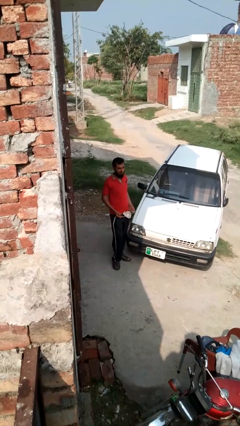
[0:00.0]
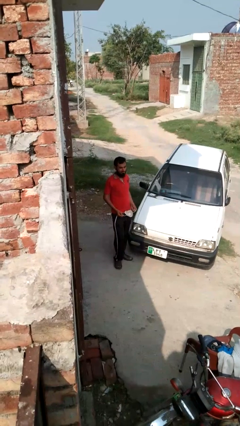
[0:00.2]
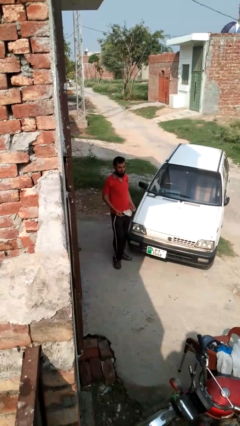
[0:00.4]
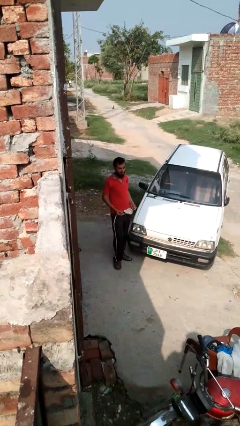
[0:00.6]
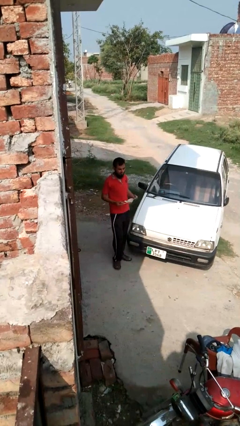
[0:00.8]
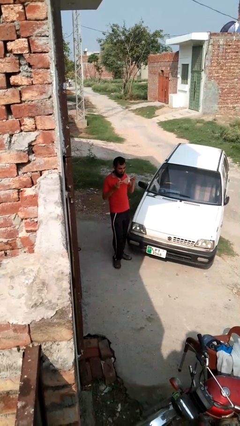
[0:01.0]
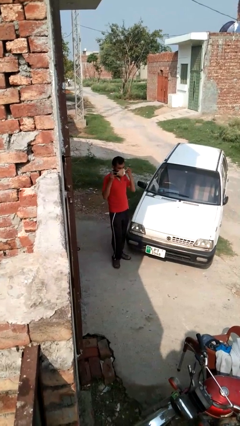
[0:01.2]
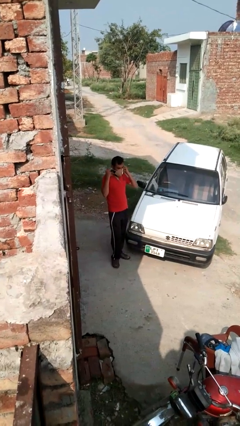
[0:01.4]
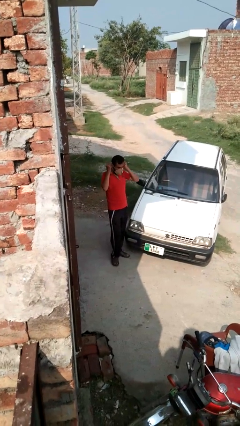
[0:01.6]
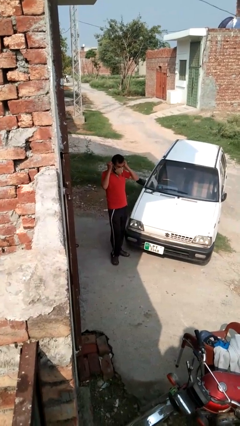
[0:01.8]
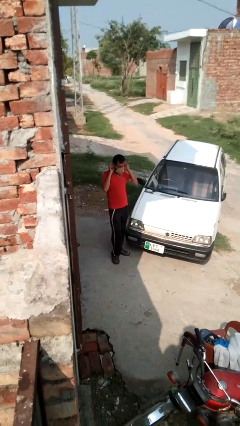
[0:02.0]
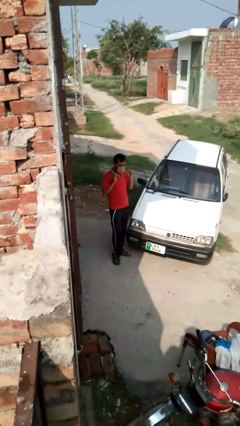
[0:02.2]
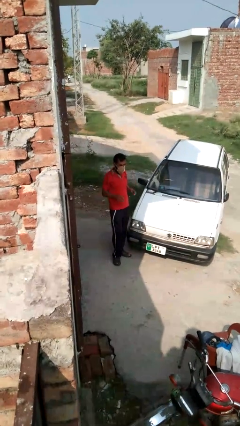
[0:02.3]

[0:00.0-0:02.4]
person puts on facemask

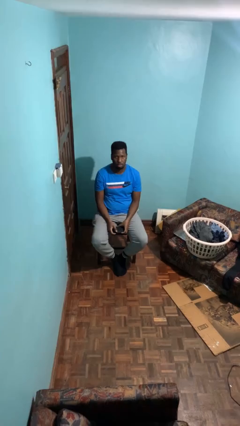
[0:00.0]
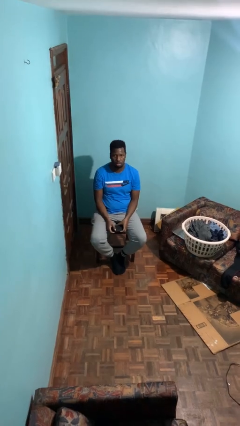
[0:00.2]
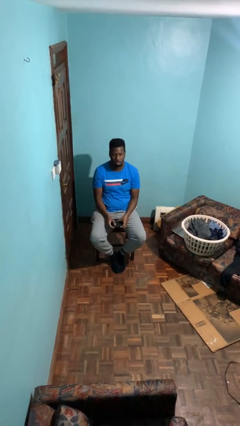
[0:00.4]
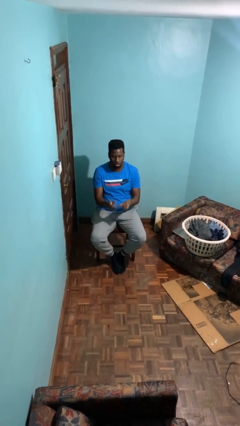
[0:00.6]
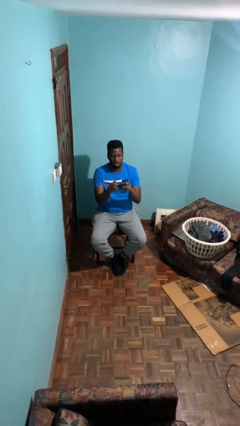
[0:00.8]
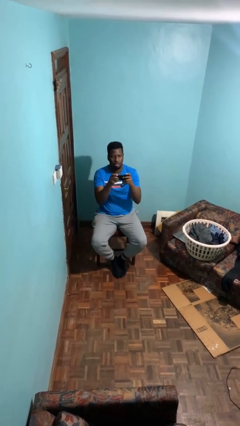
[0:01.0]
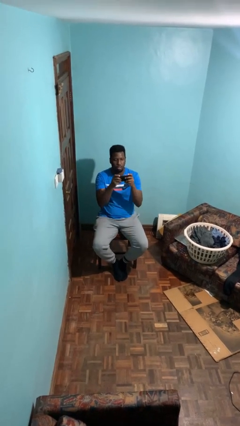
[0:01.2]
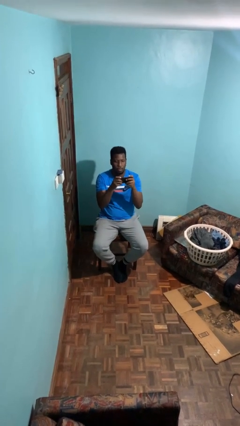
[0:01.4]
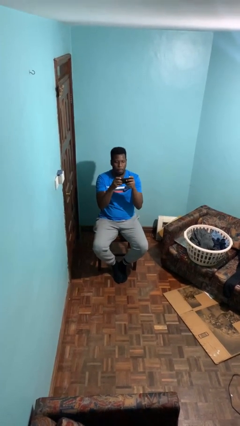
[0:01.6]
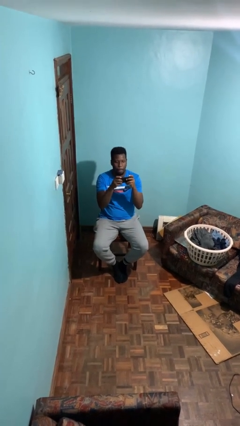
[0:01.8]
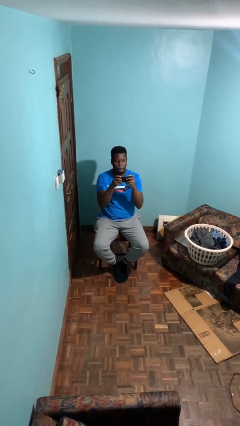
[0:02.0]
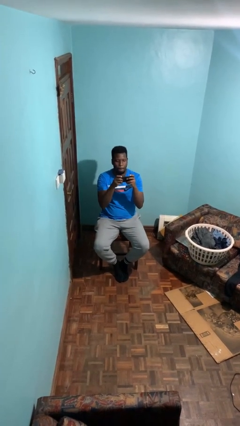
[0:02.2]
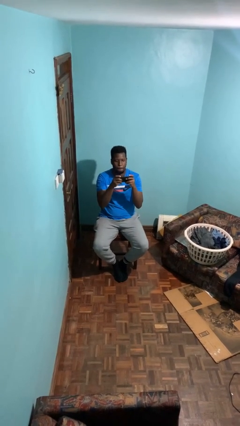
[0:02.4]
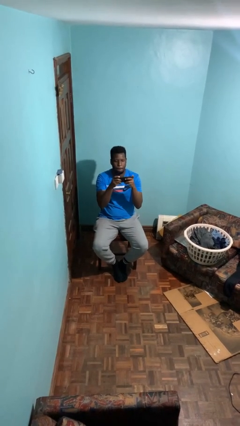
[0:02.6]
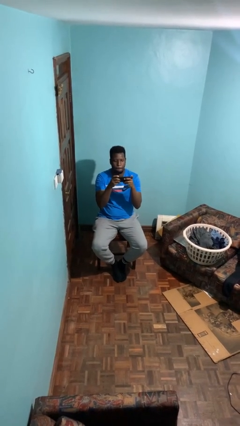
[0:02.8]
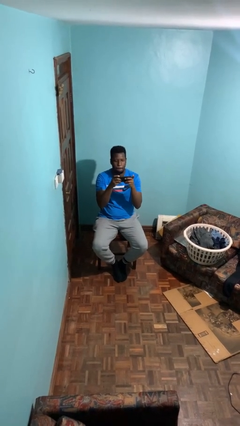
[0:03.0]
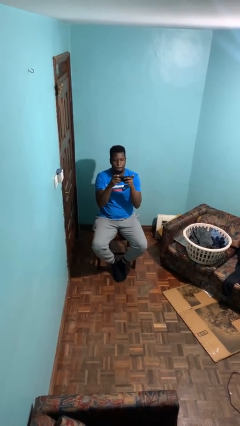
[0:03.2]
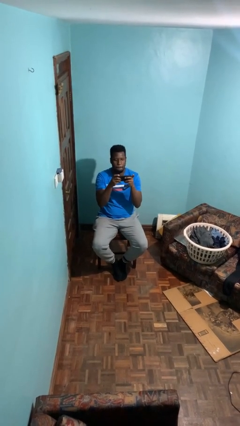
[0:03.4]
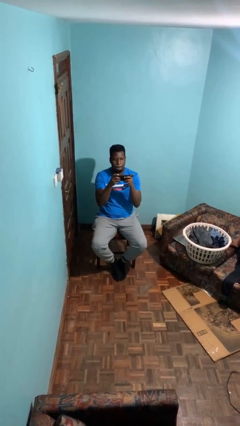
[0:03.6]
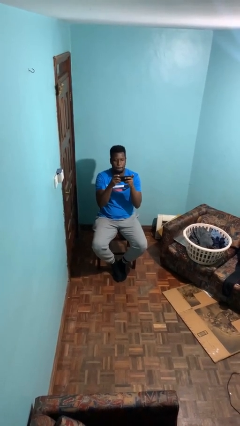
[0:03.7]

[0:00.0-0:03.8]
person interacts with handheld game

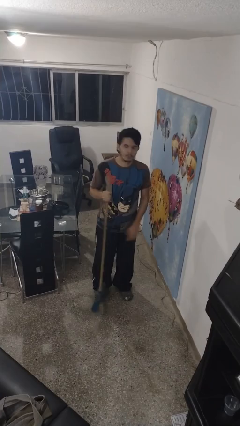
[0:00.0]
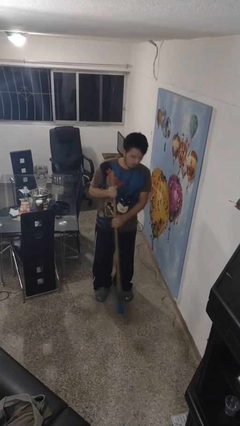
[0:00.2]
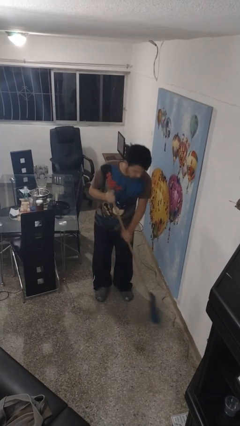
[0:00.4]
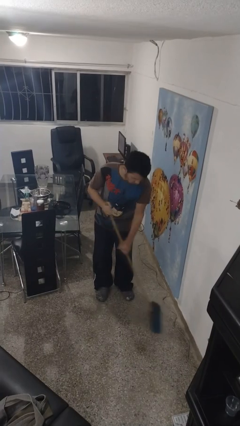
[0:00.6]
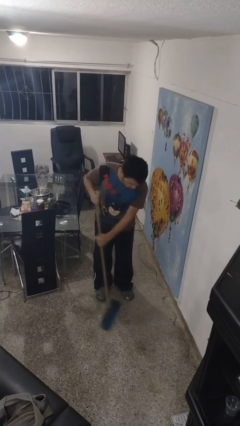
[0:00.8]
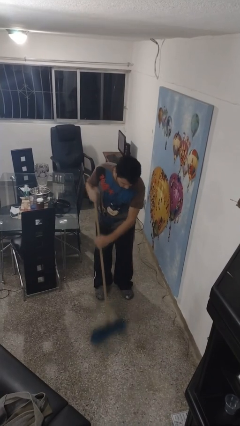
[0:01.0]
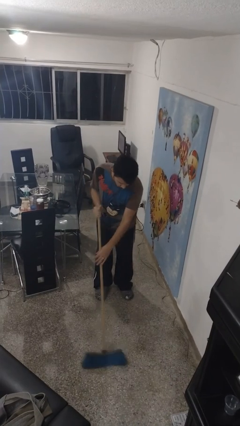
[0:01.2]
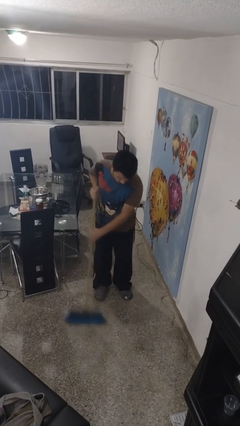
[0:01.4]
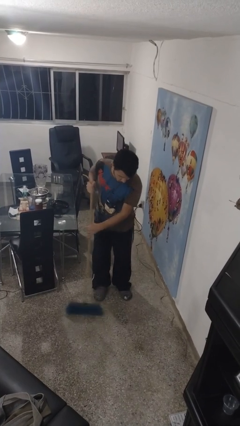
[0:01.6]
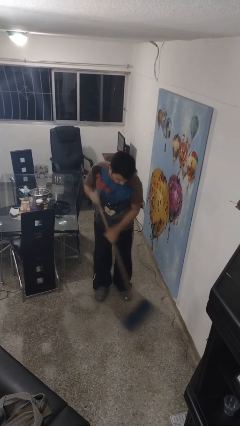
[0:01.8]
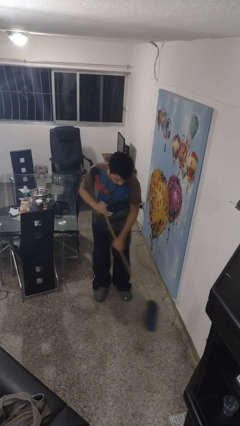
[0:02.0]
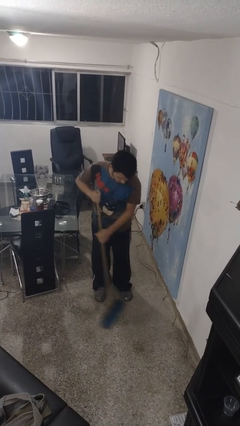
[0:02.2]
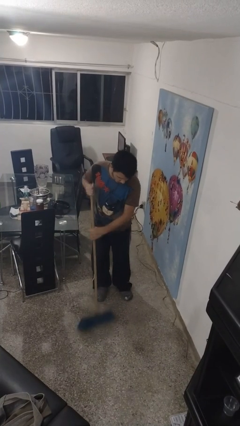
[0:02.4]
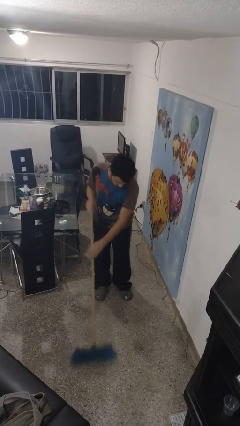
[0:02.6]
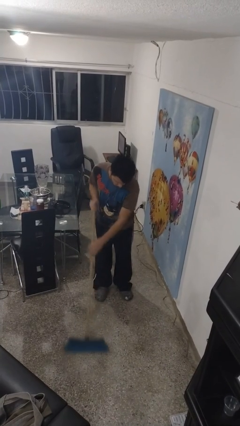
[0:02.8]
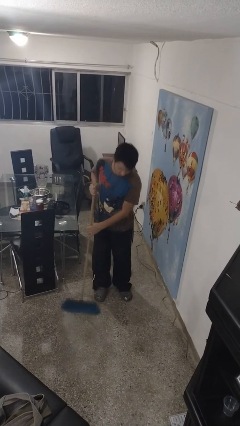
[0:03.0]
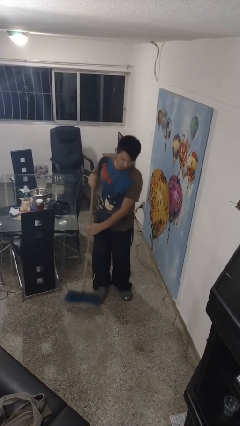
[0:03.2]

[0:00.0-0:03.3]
person sweeps floor

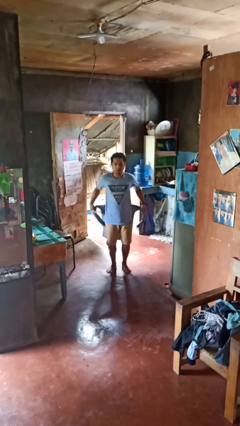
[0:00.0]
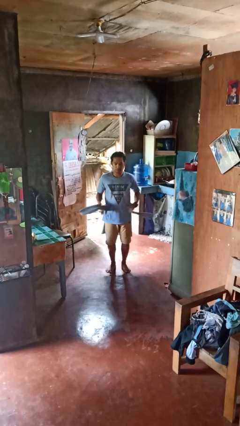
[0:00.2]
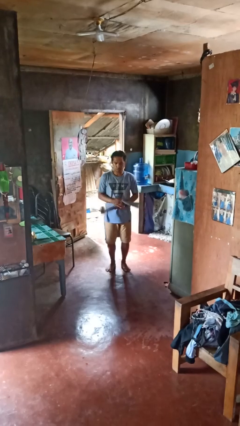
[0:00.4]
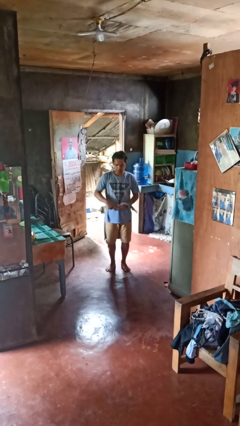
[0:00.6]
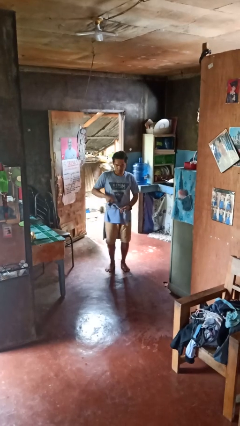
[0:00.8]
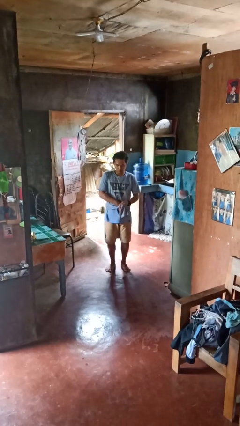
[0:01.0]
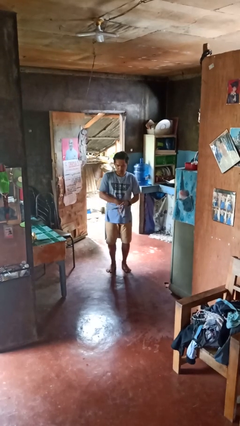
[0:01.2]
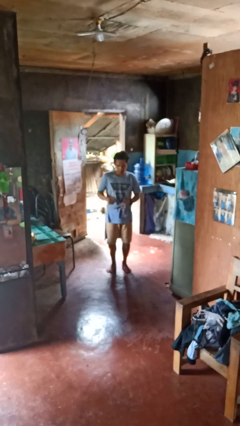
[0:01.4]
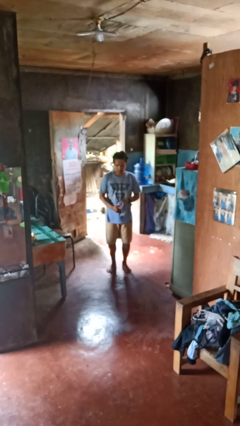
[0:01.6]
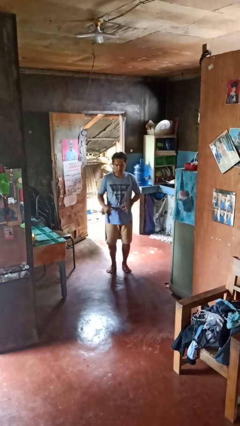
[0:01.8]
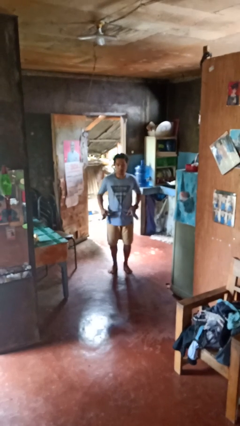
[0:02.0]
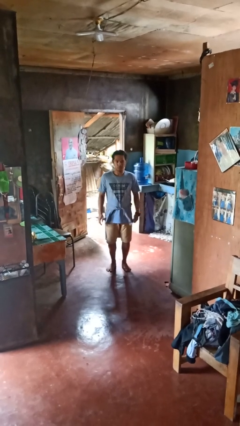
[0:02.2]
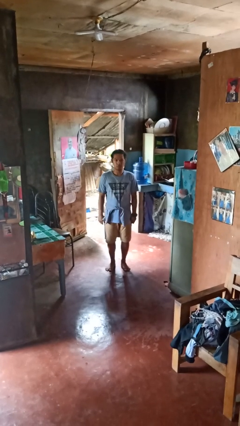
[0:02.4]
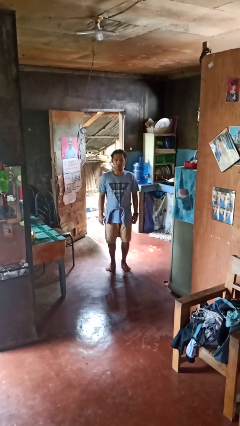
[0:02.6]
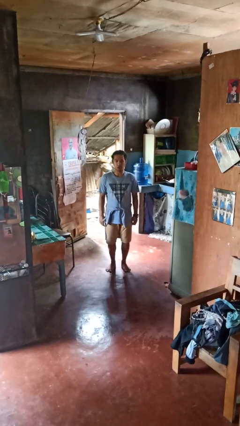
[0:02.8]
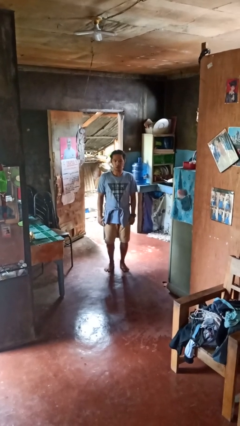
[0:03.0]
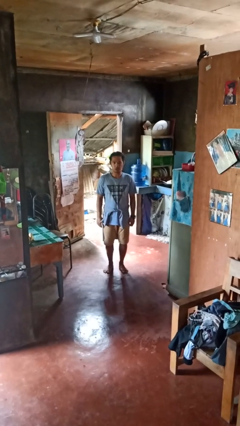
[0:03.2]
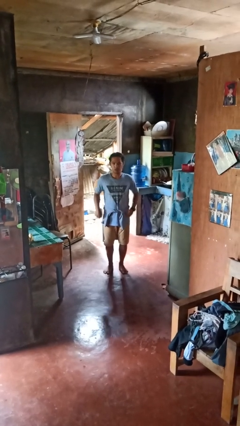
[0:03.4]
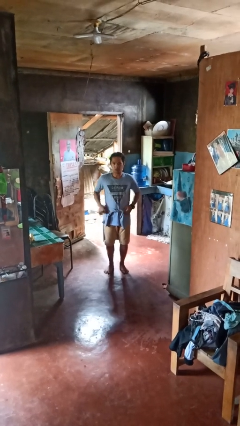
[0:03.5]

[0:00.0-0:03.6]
person ties jacket around waist

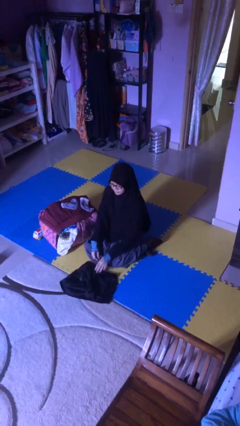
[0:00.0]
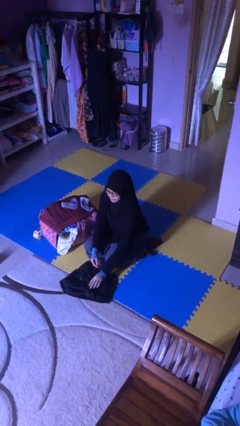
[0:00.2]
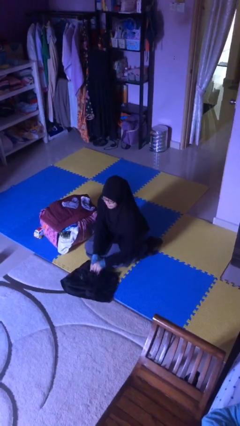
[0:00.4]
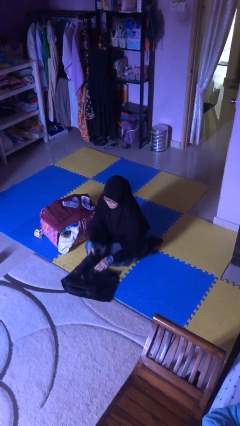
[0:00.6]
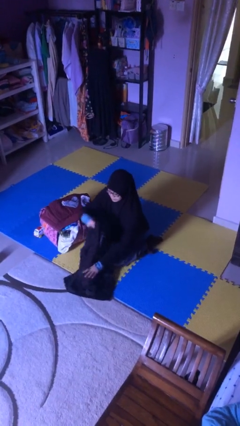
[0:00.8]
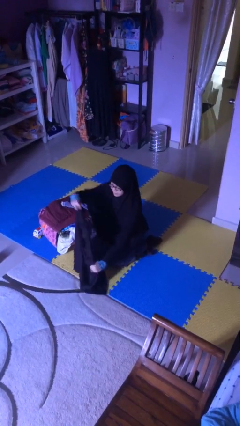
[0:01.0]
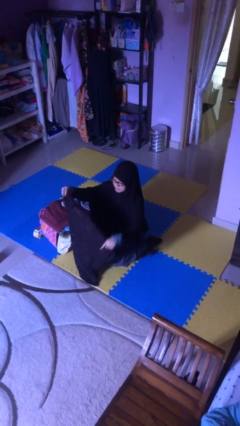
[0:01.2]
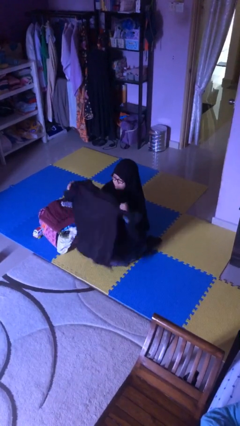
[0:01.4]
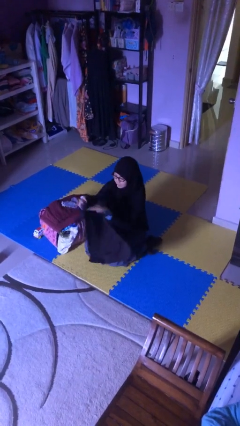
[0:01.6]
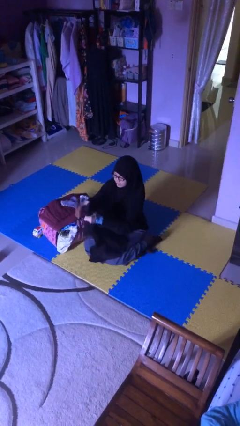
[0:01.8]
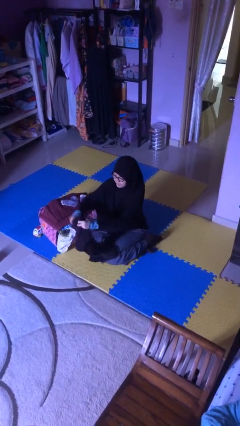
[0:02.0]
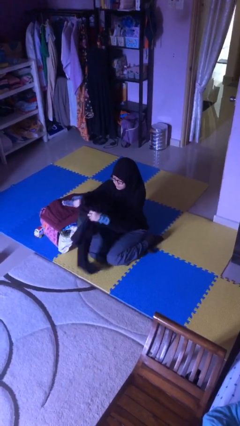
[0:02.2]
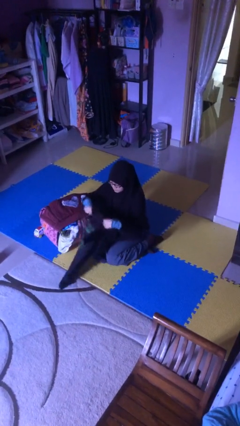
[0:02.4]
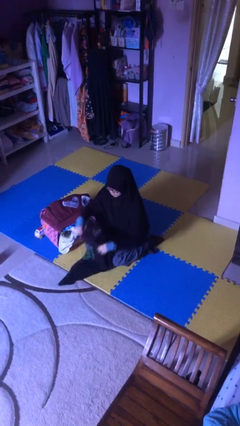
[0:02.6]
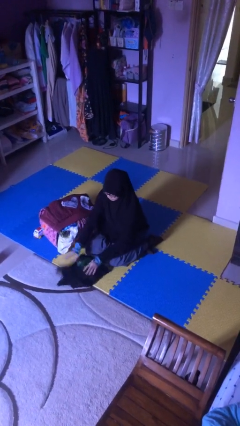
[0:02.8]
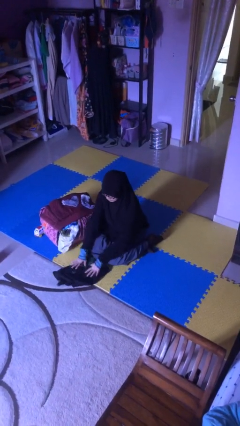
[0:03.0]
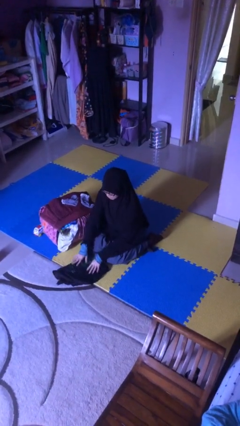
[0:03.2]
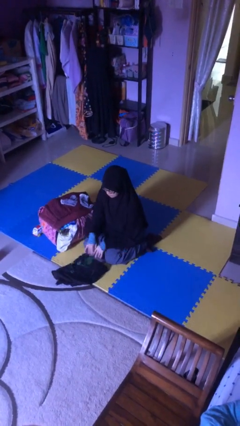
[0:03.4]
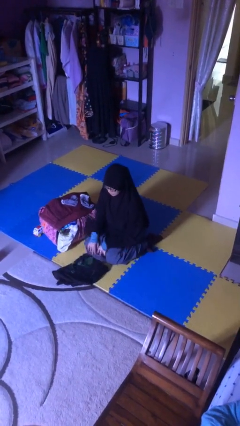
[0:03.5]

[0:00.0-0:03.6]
person folds shirt

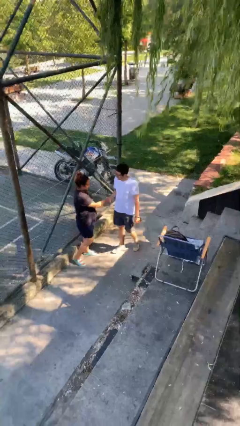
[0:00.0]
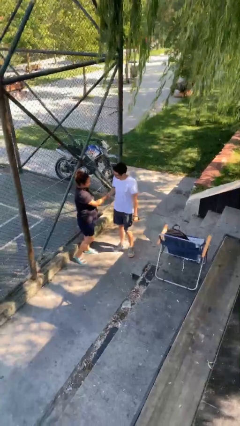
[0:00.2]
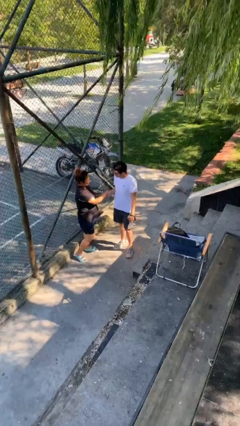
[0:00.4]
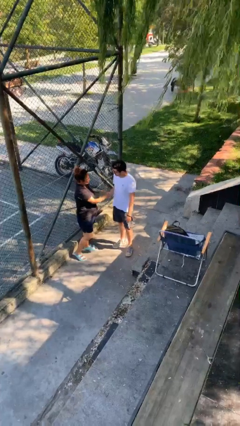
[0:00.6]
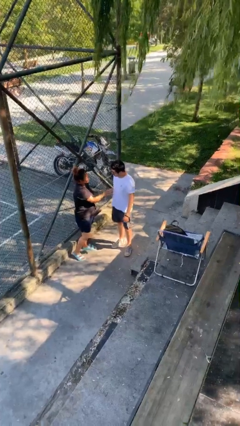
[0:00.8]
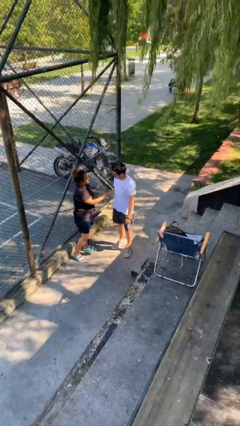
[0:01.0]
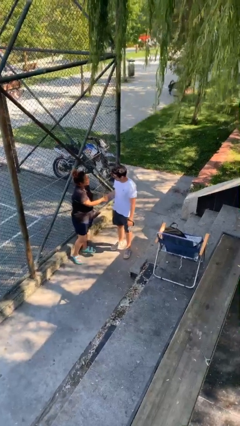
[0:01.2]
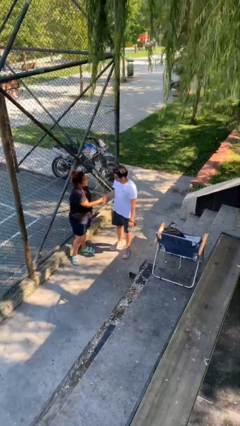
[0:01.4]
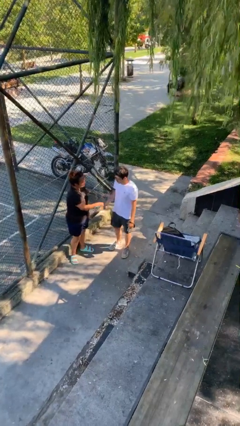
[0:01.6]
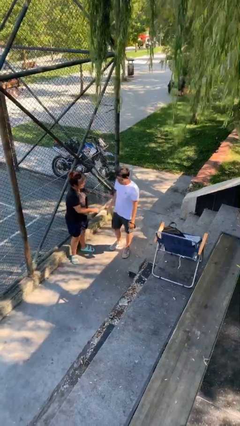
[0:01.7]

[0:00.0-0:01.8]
person shakes hand
